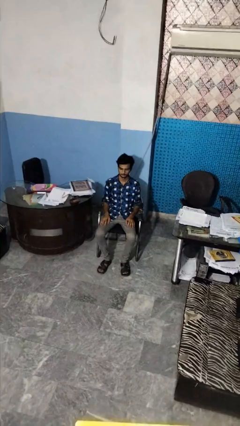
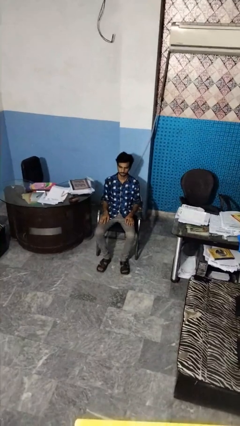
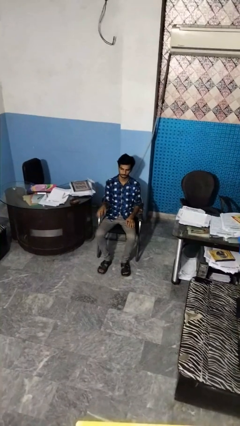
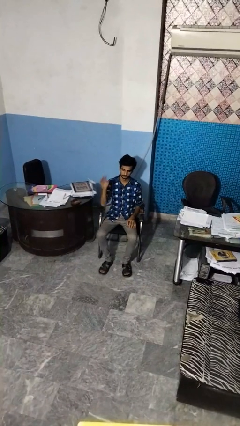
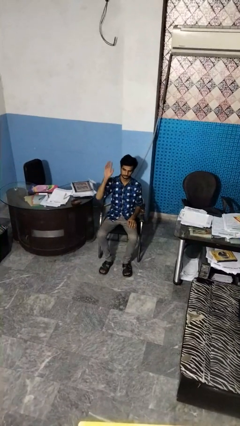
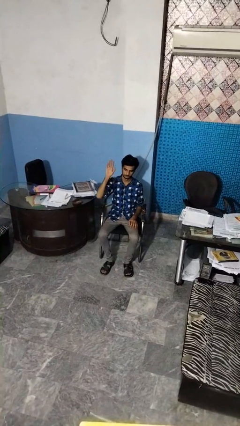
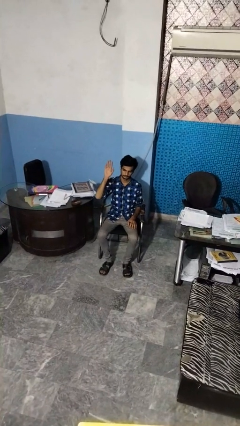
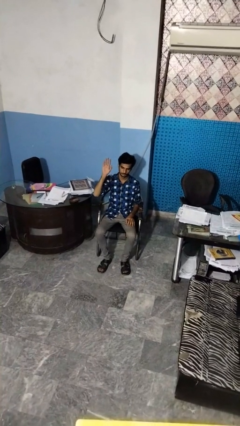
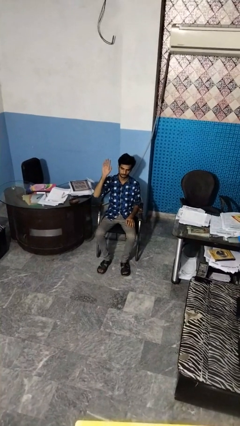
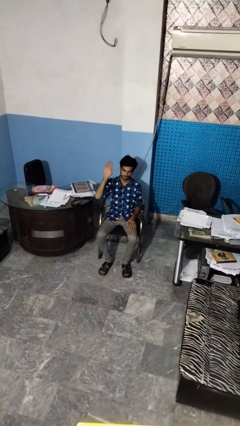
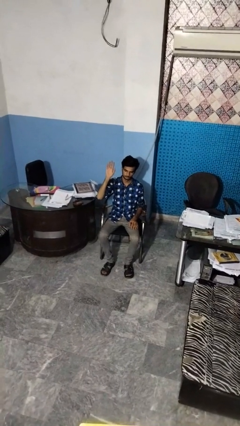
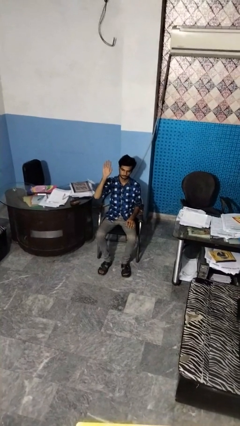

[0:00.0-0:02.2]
person gestures raise hand

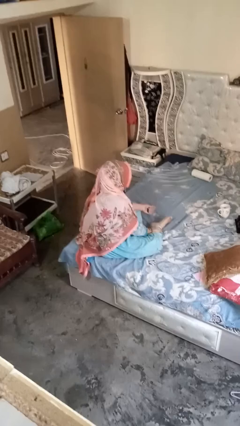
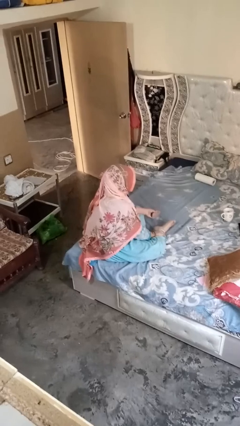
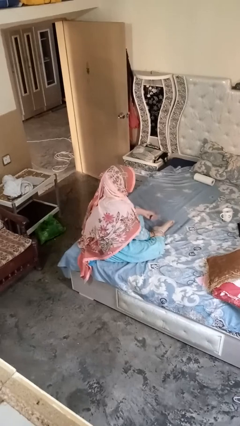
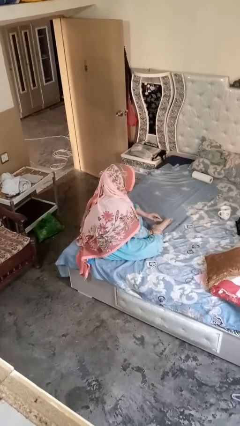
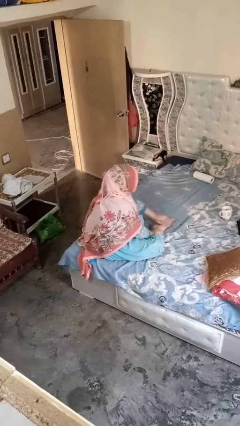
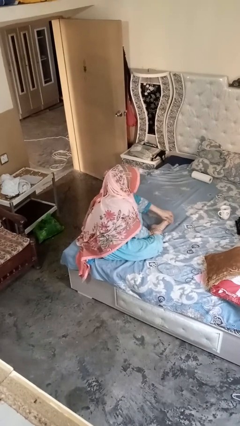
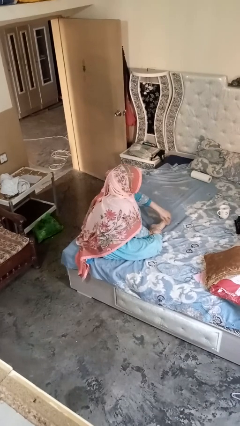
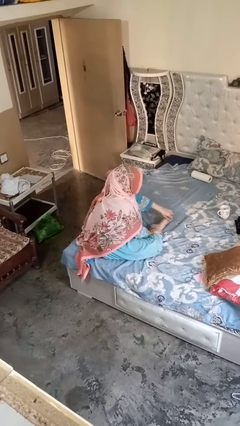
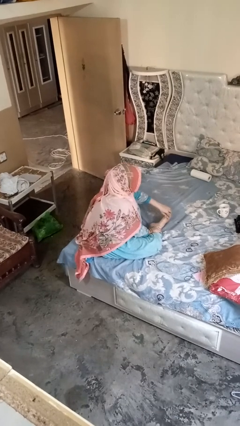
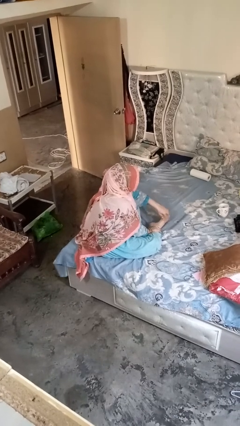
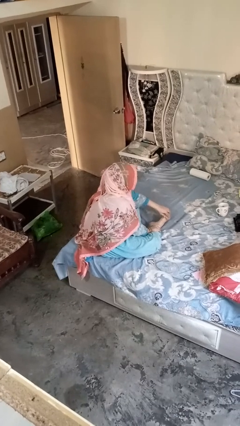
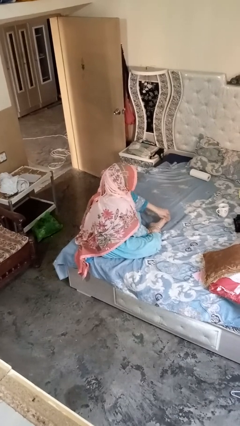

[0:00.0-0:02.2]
person rubs foot

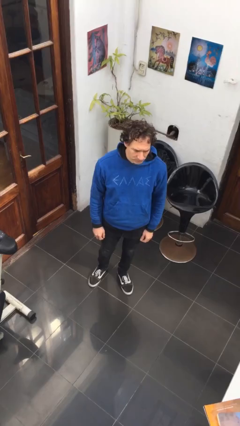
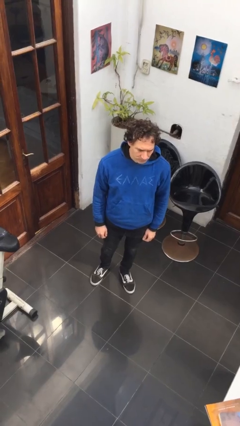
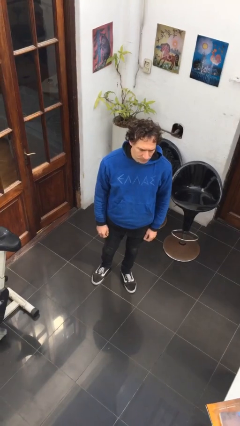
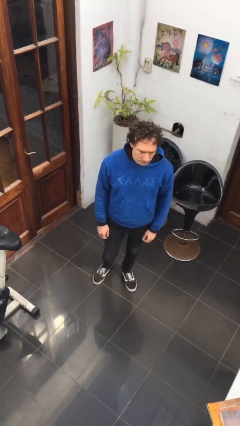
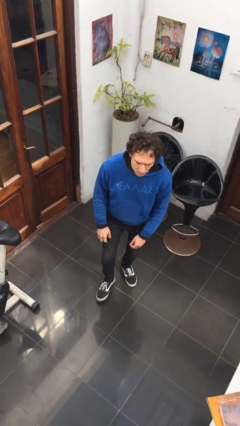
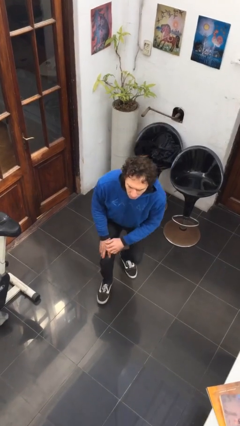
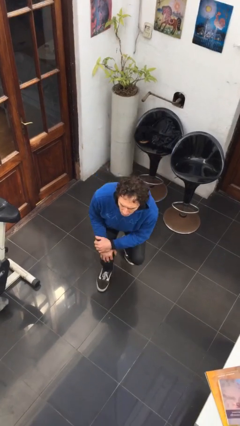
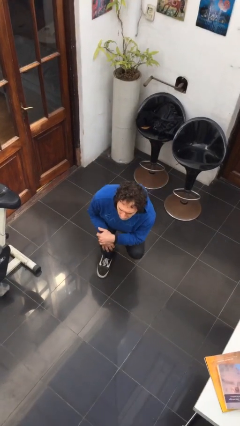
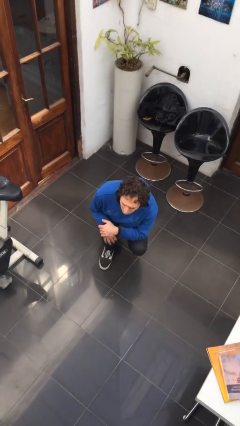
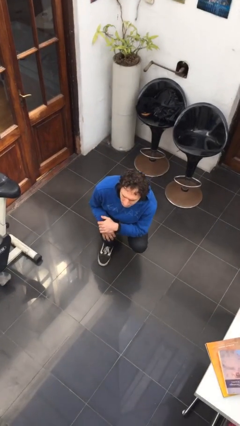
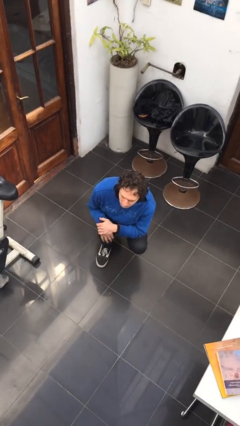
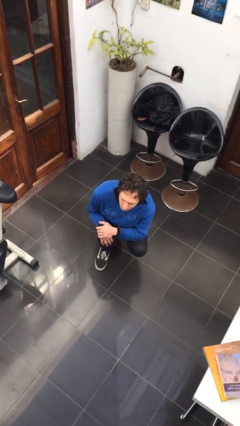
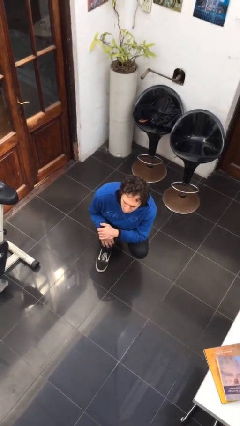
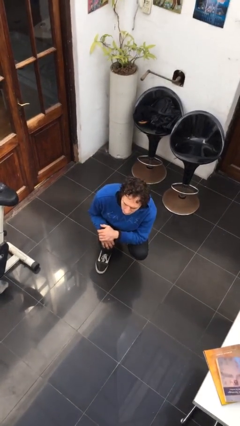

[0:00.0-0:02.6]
person squats

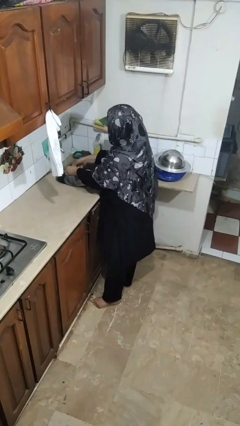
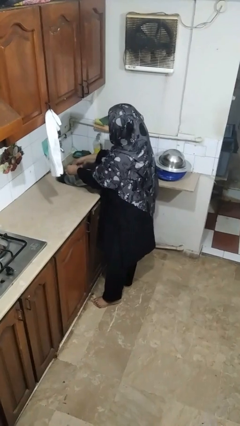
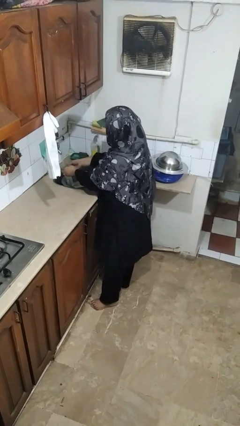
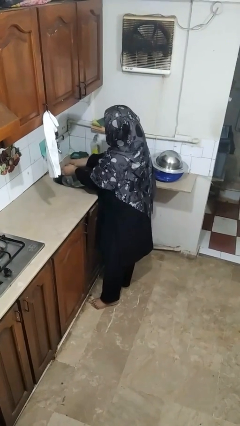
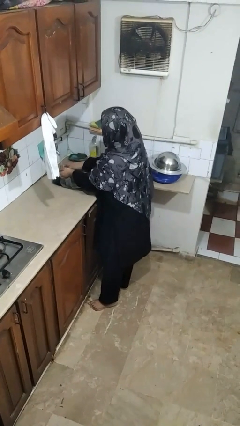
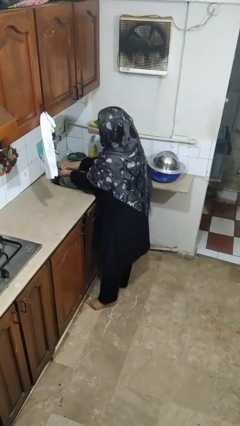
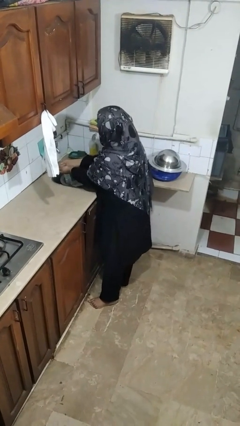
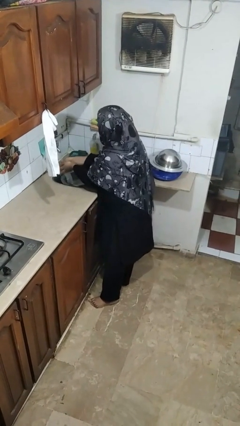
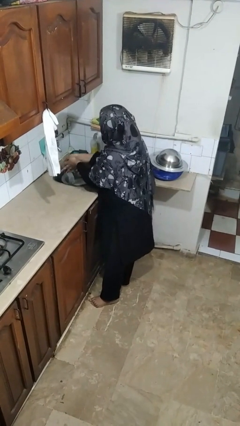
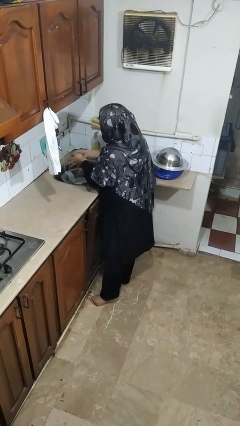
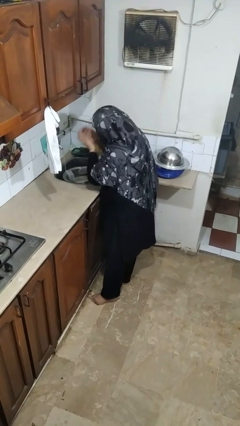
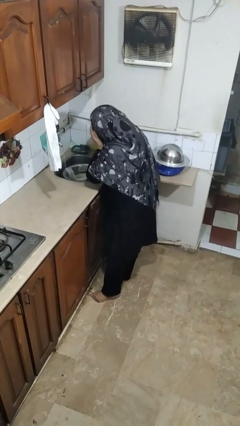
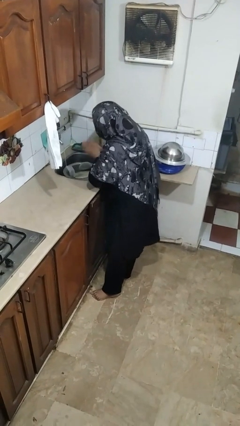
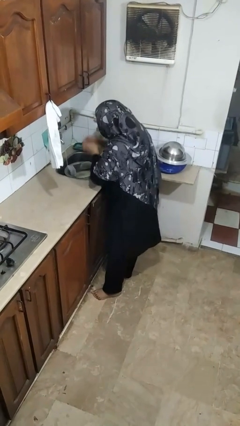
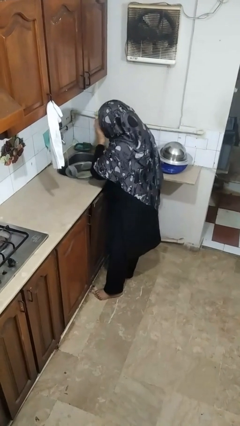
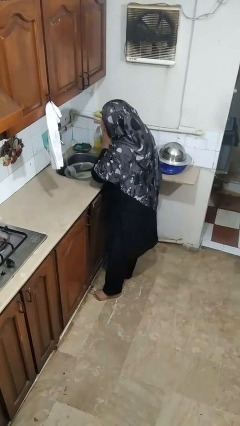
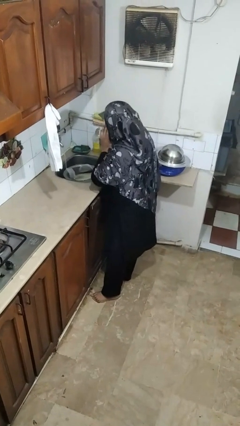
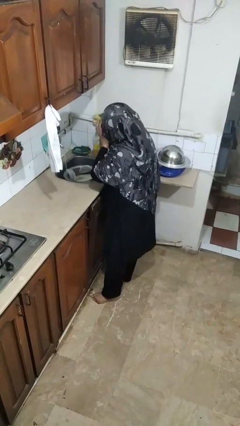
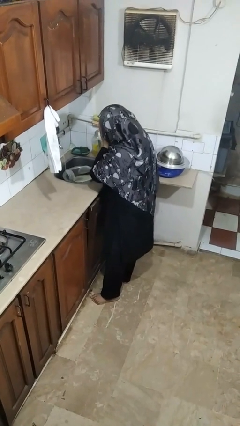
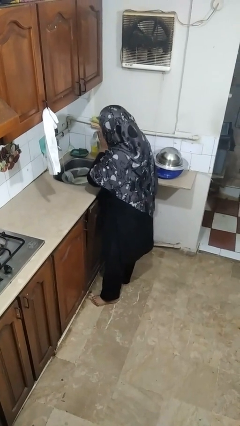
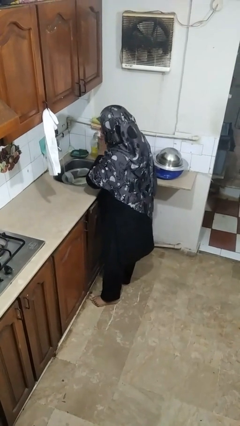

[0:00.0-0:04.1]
person washes face

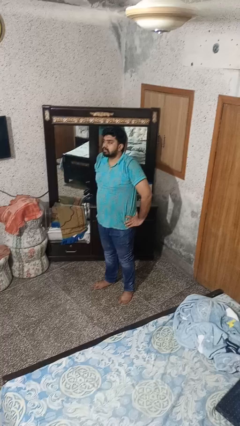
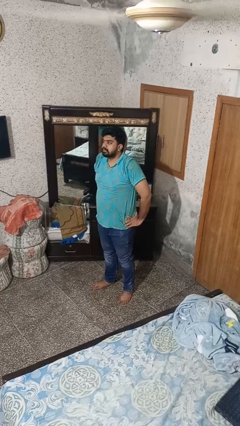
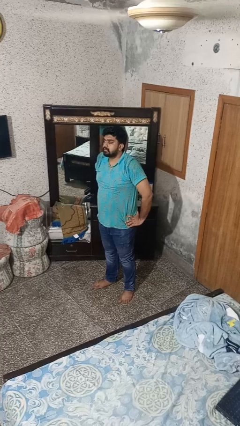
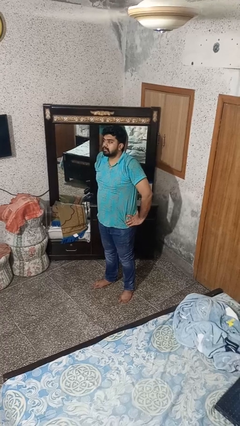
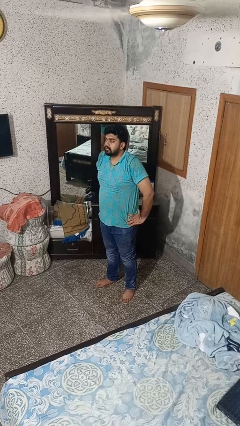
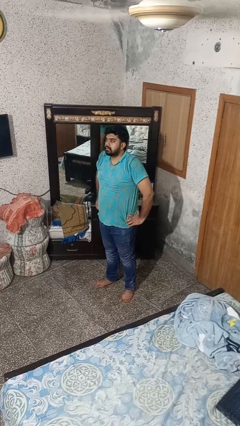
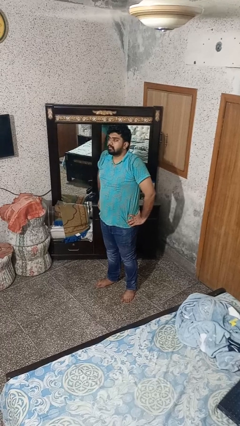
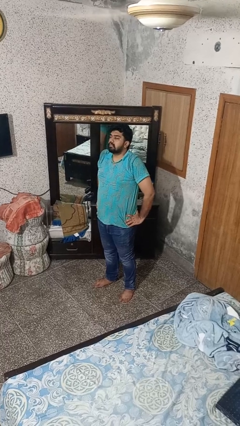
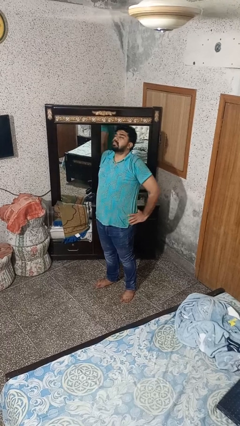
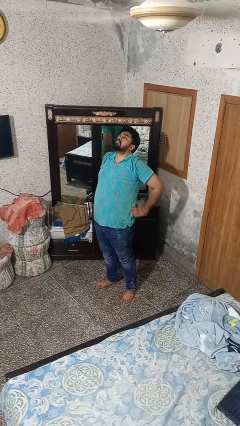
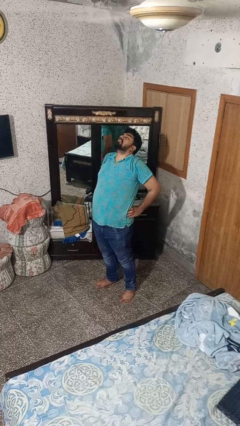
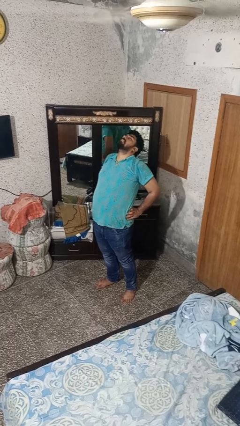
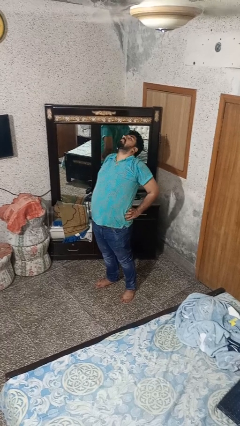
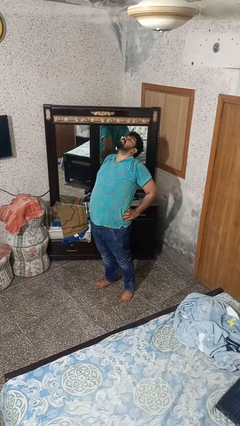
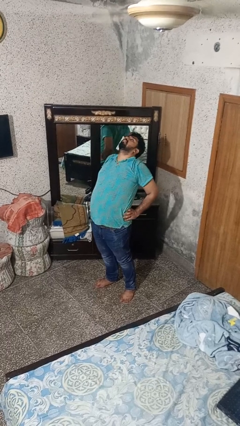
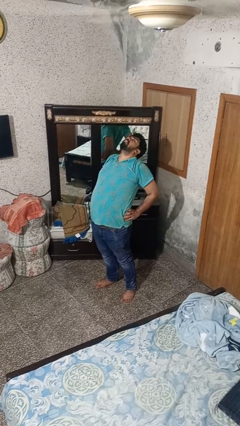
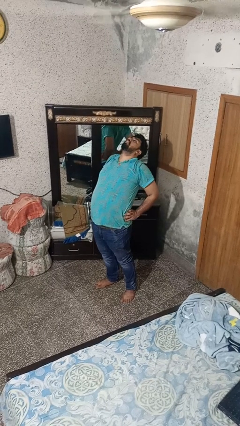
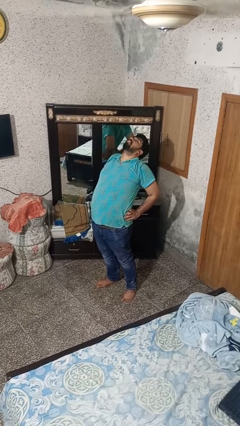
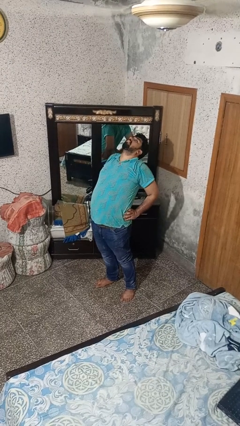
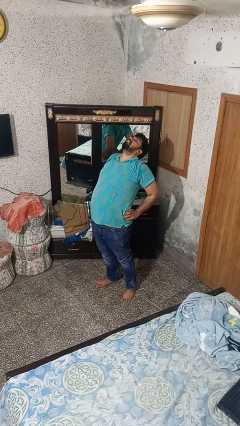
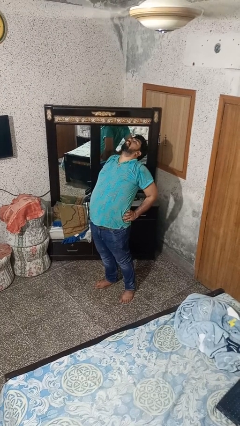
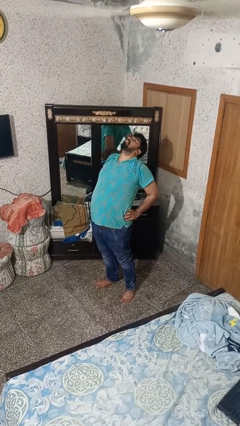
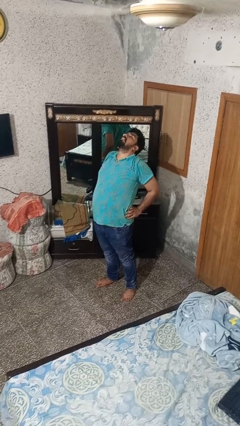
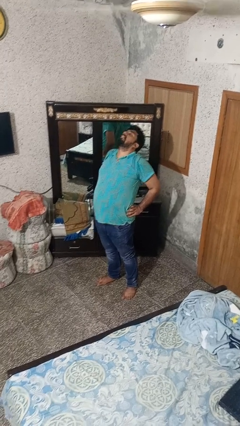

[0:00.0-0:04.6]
person stretches back

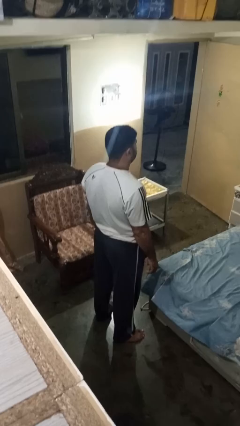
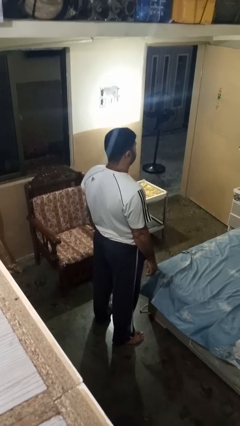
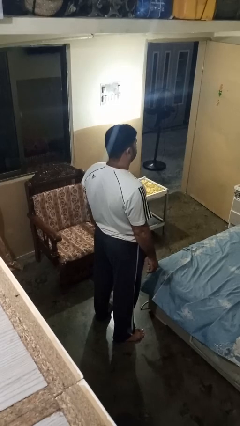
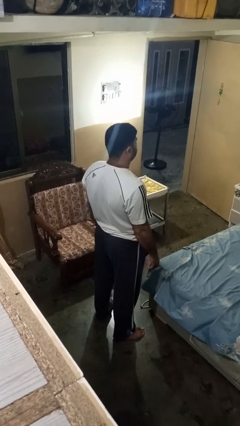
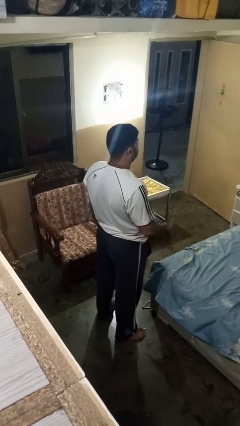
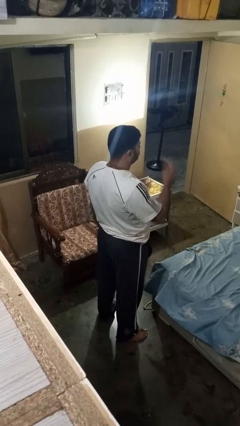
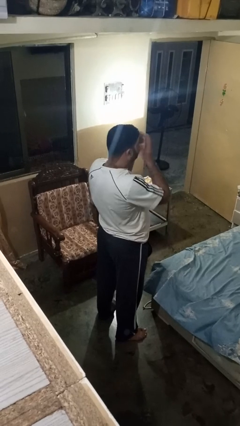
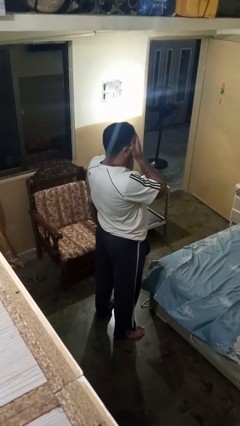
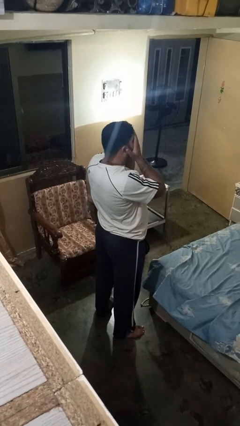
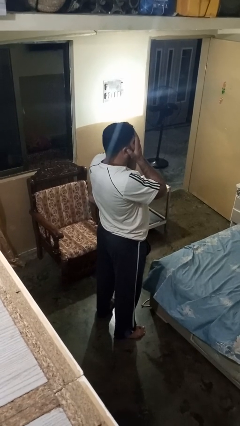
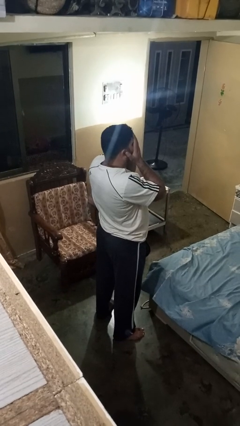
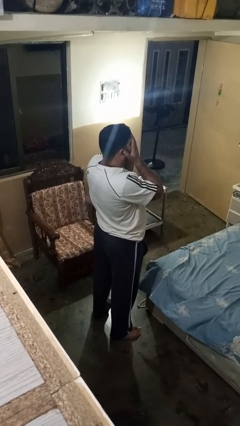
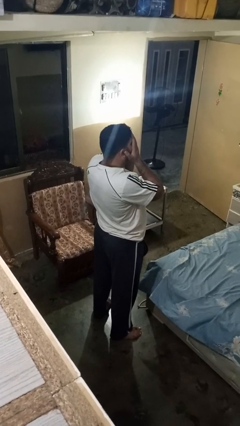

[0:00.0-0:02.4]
person covers face with hands
